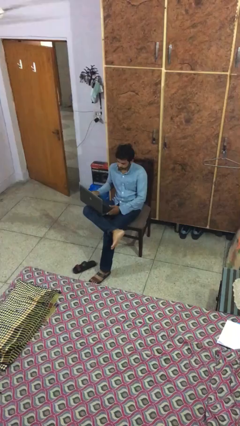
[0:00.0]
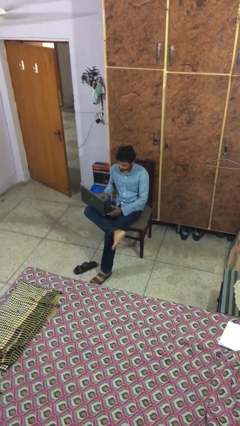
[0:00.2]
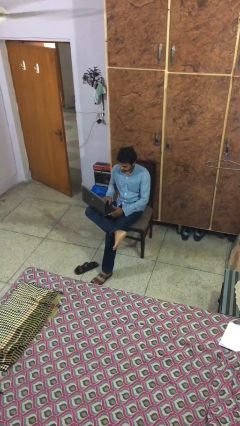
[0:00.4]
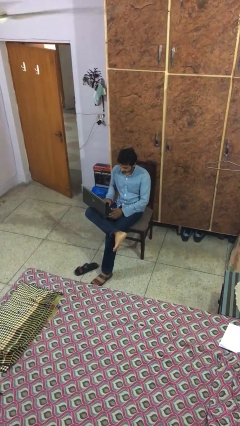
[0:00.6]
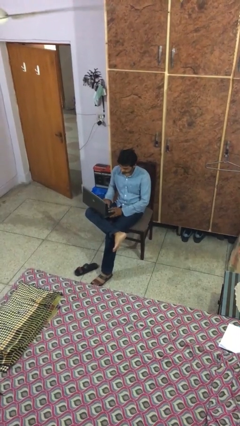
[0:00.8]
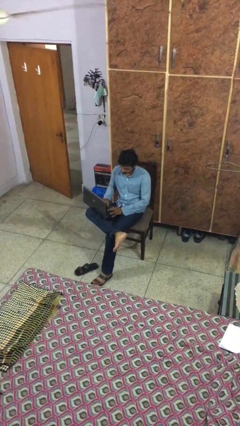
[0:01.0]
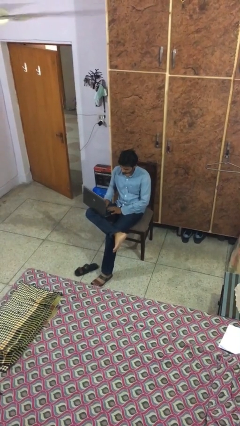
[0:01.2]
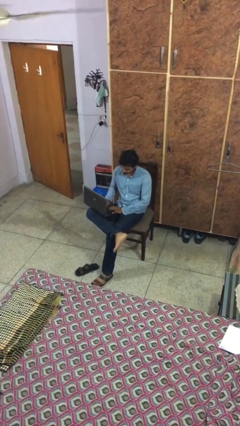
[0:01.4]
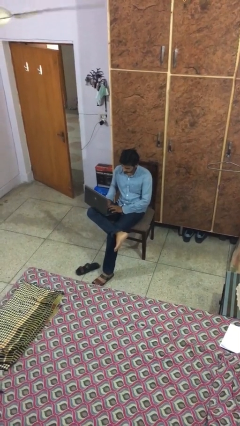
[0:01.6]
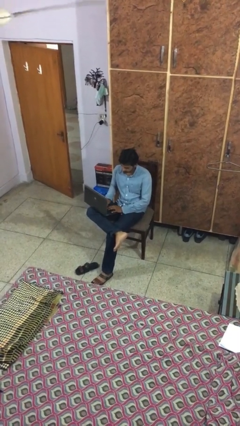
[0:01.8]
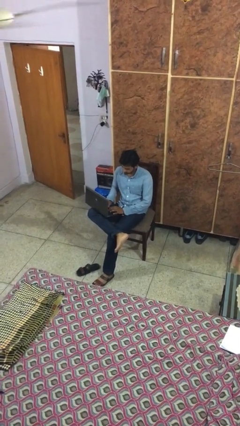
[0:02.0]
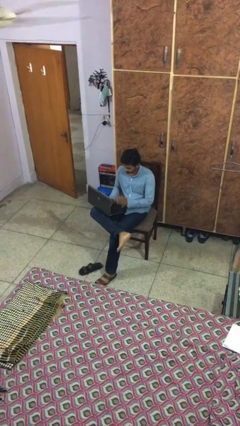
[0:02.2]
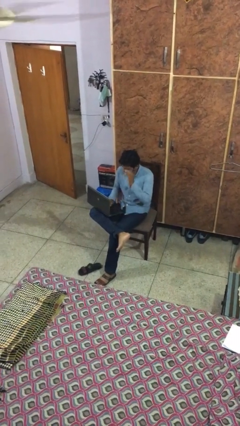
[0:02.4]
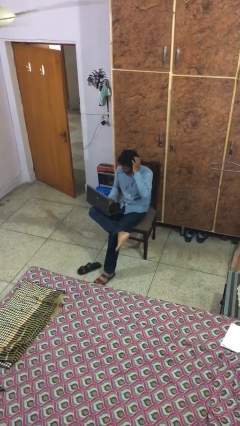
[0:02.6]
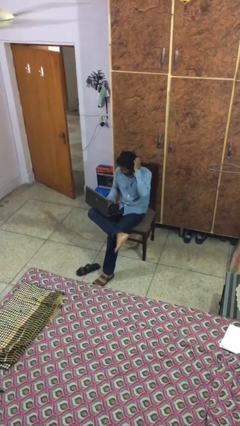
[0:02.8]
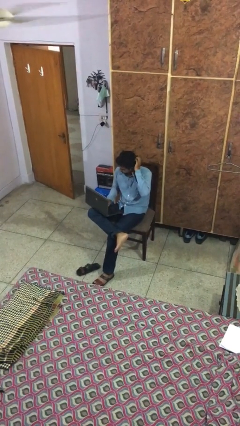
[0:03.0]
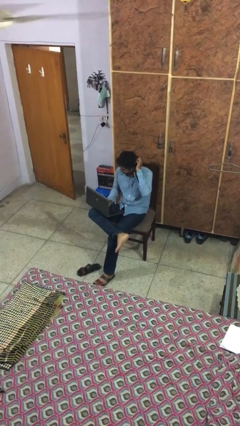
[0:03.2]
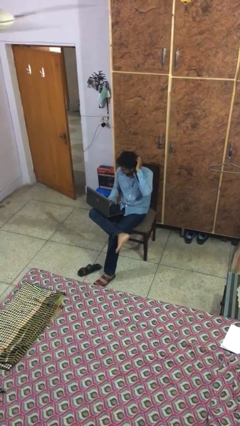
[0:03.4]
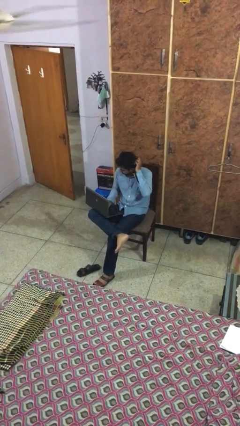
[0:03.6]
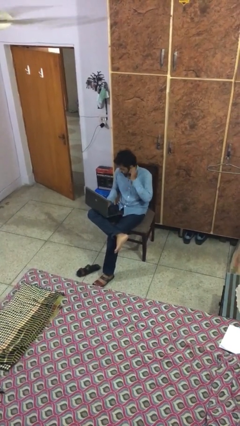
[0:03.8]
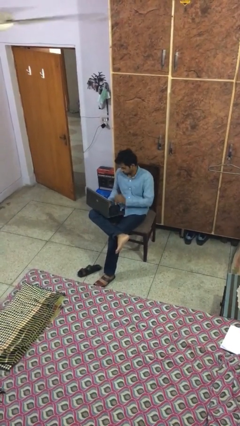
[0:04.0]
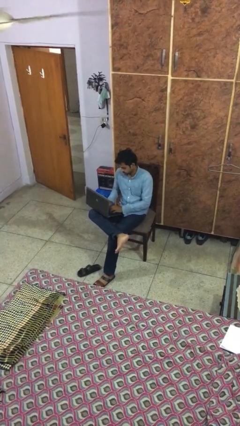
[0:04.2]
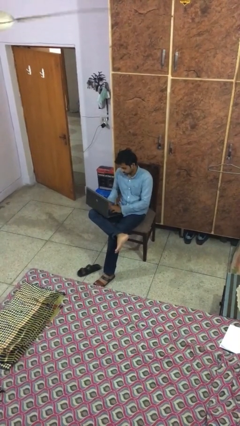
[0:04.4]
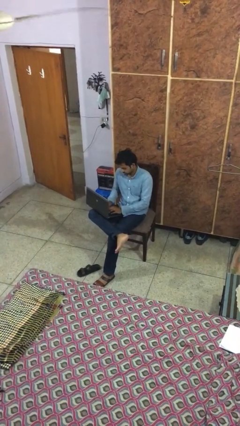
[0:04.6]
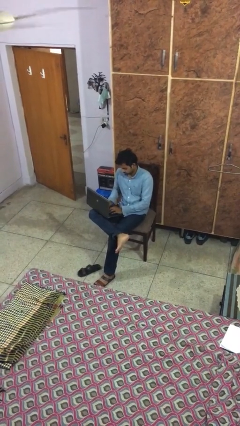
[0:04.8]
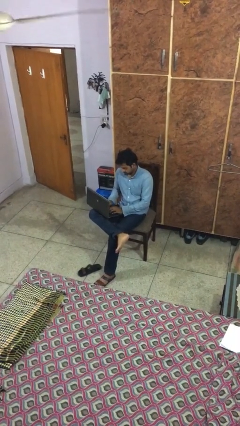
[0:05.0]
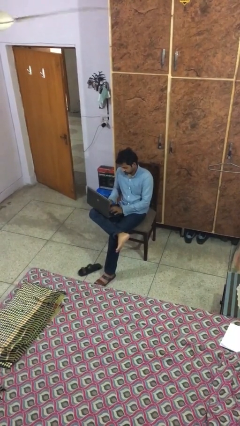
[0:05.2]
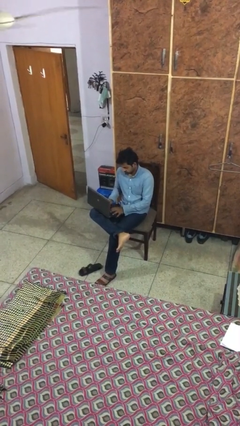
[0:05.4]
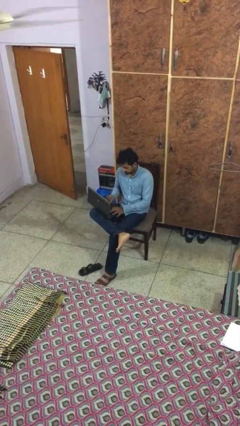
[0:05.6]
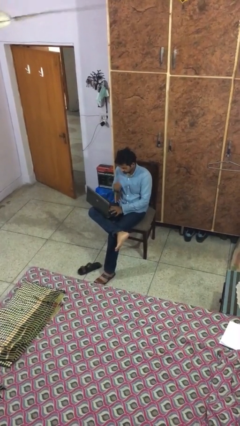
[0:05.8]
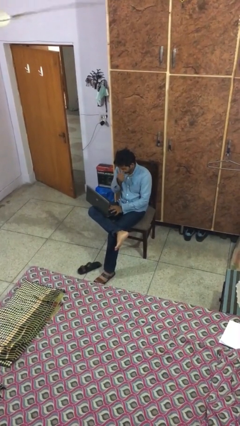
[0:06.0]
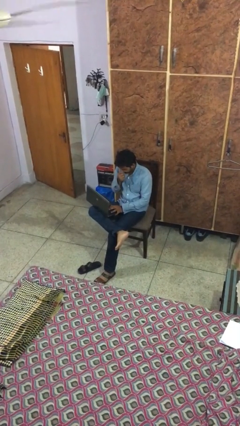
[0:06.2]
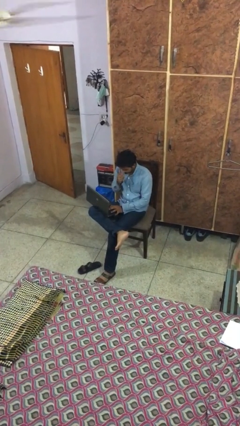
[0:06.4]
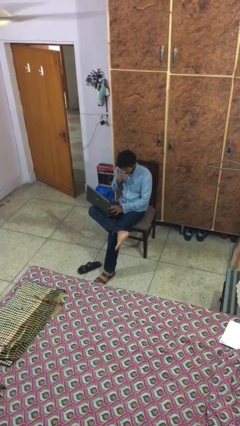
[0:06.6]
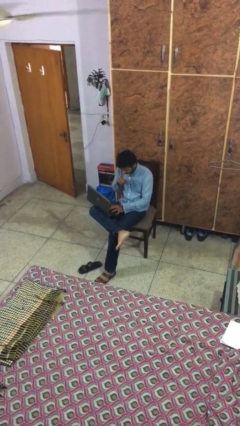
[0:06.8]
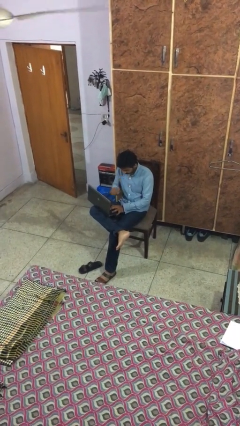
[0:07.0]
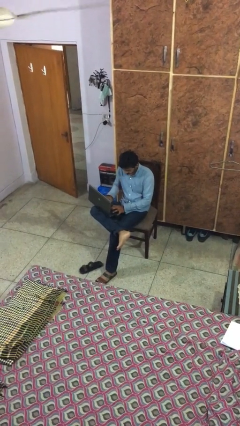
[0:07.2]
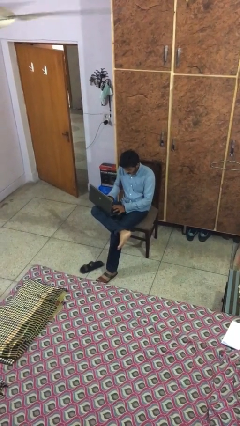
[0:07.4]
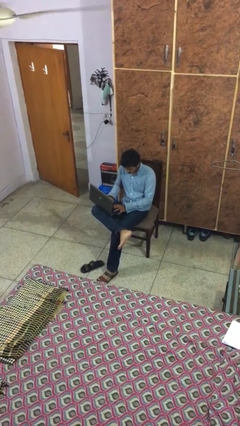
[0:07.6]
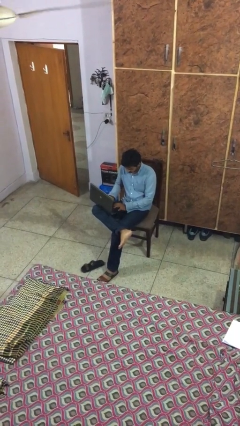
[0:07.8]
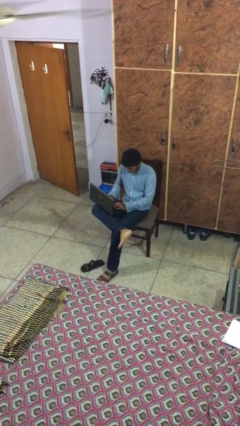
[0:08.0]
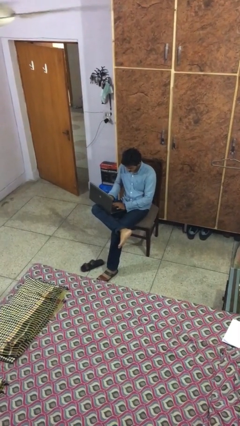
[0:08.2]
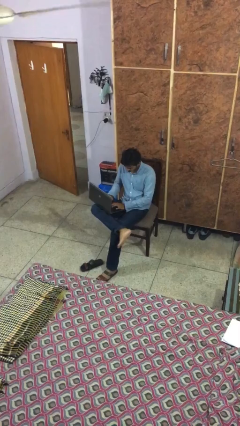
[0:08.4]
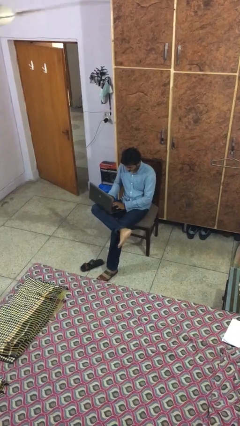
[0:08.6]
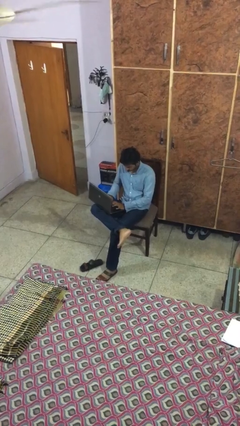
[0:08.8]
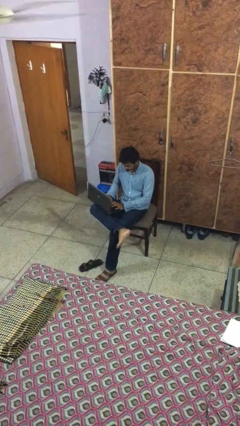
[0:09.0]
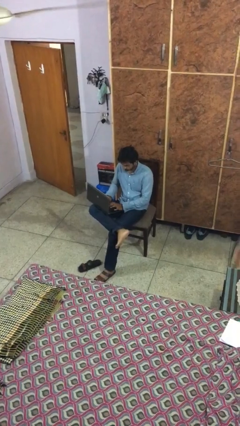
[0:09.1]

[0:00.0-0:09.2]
person interacts with laptop

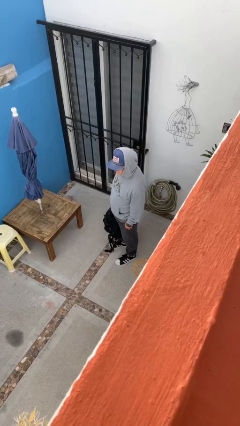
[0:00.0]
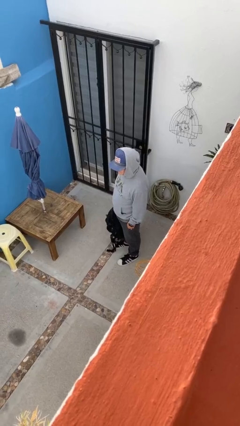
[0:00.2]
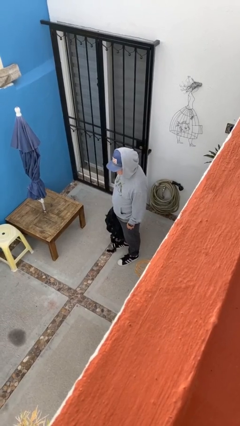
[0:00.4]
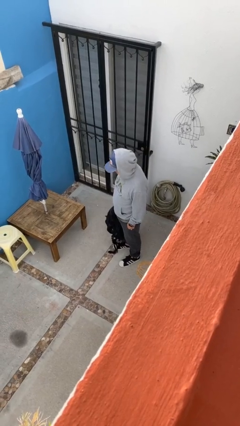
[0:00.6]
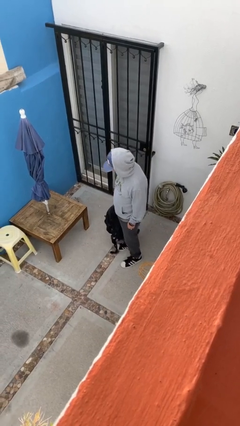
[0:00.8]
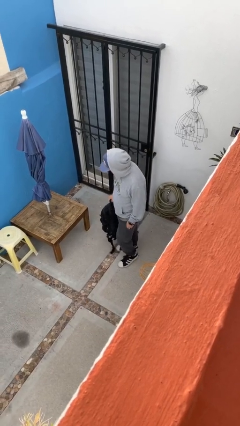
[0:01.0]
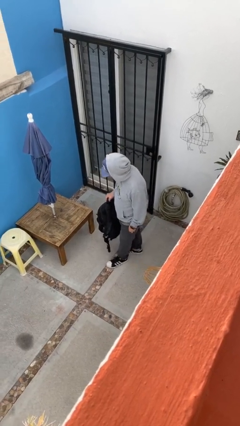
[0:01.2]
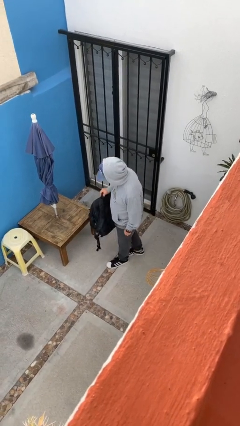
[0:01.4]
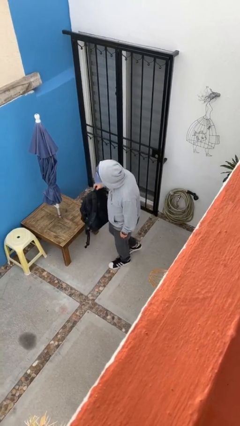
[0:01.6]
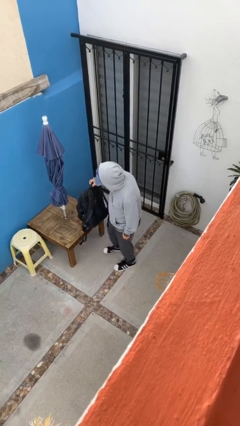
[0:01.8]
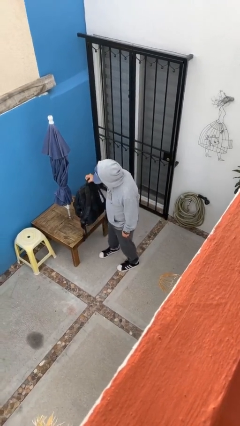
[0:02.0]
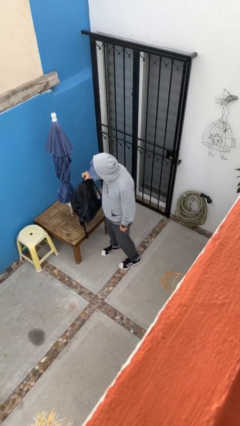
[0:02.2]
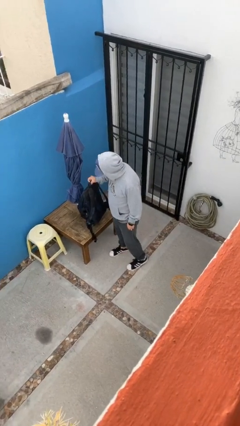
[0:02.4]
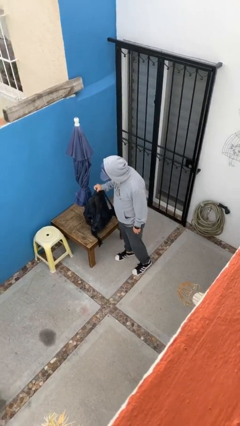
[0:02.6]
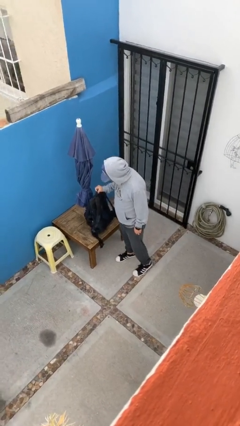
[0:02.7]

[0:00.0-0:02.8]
person puts down object on table

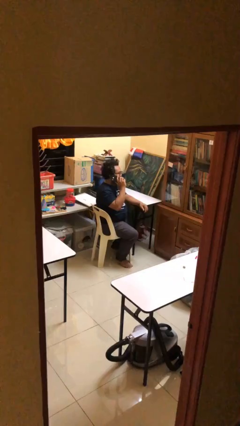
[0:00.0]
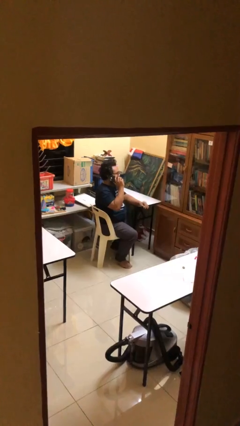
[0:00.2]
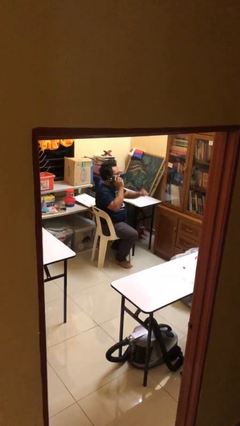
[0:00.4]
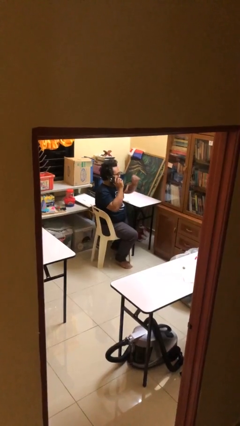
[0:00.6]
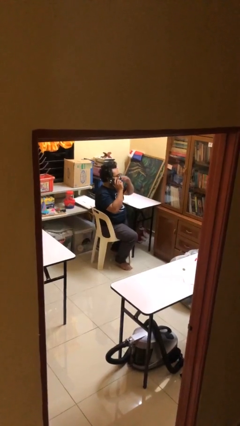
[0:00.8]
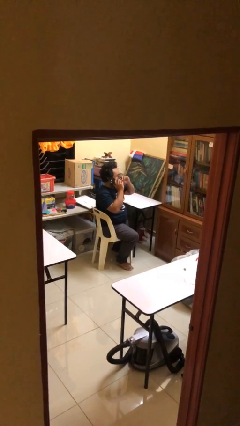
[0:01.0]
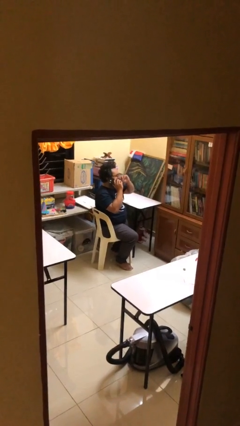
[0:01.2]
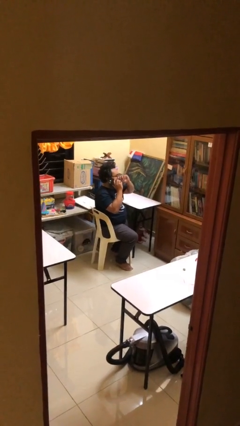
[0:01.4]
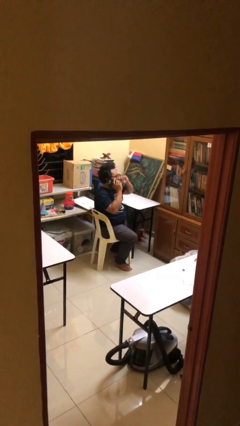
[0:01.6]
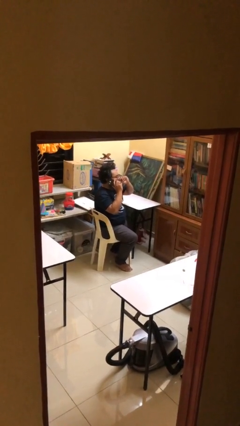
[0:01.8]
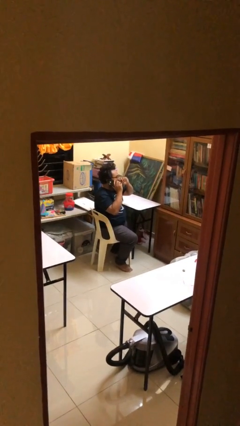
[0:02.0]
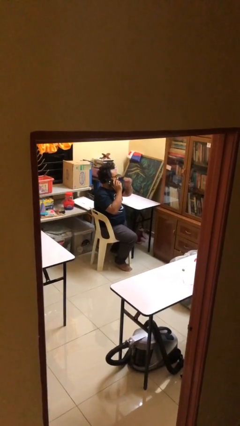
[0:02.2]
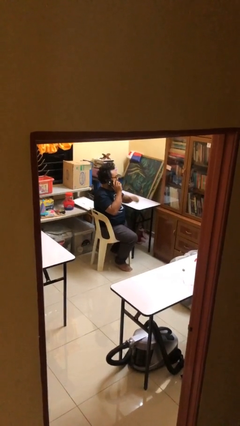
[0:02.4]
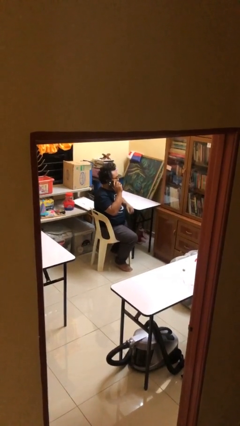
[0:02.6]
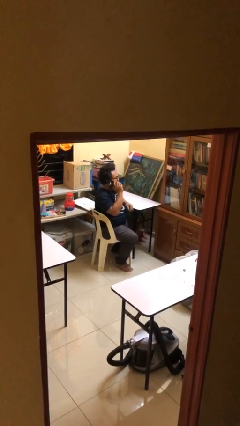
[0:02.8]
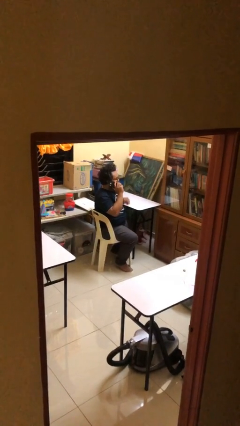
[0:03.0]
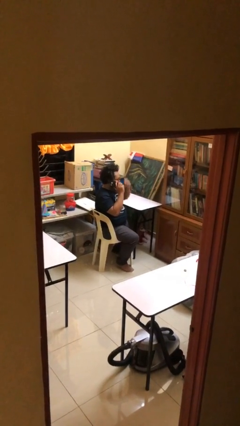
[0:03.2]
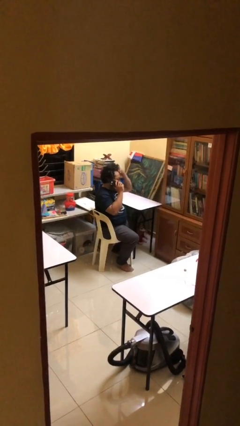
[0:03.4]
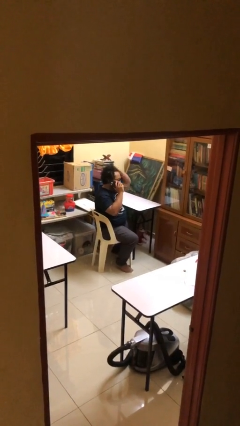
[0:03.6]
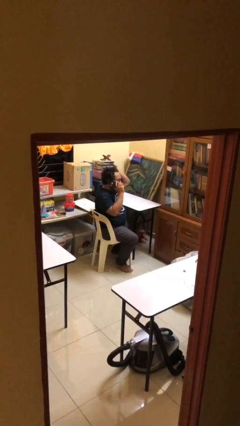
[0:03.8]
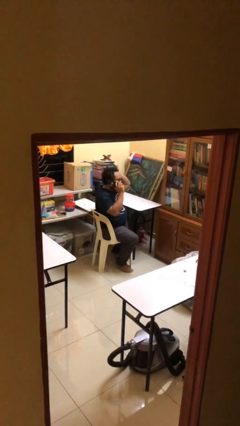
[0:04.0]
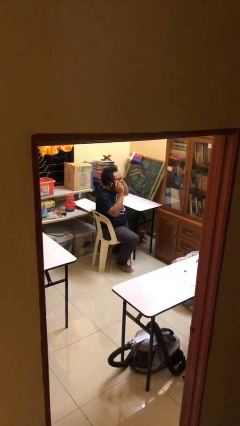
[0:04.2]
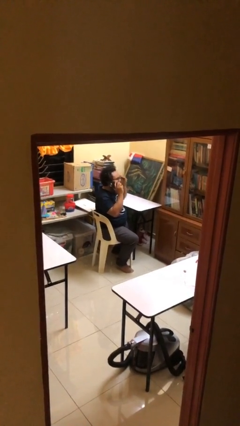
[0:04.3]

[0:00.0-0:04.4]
person talks on phone

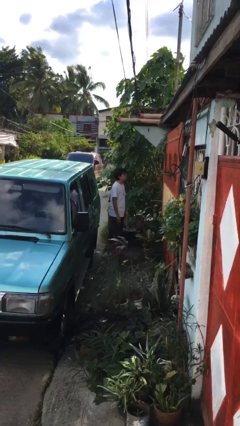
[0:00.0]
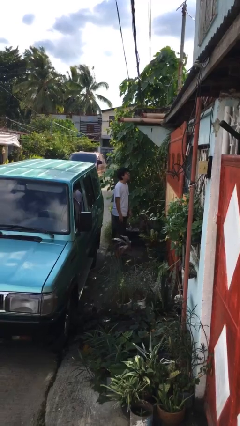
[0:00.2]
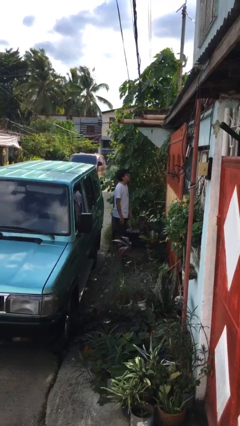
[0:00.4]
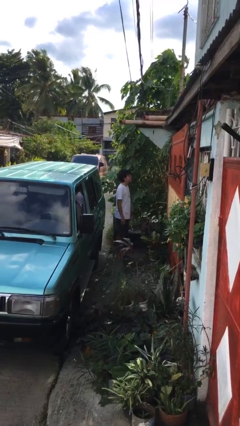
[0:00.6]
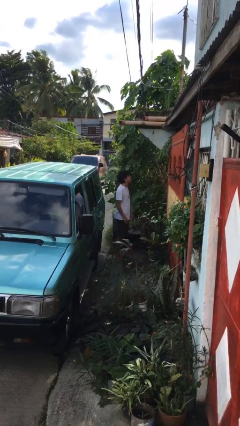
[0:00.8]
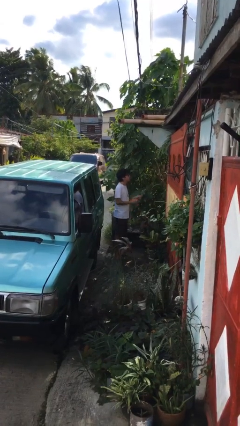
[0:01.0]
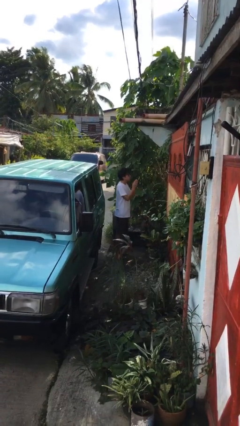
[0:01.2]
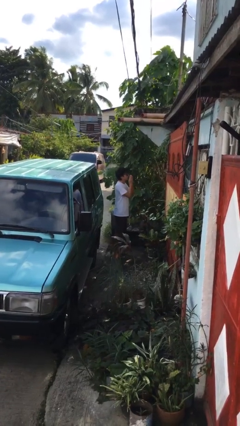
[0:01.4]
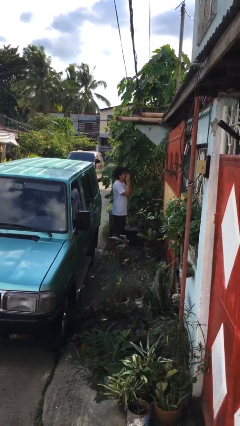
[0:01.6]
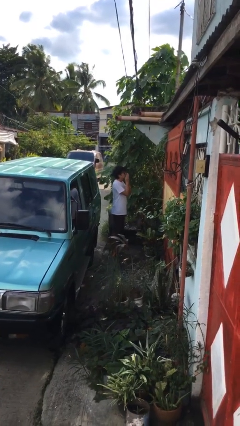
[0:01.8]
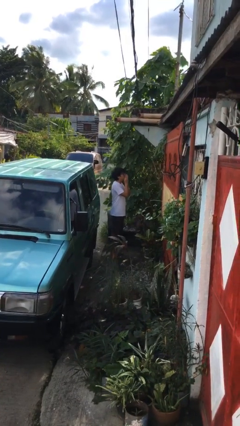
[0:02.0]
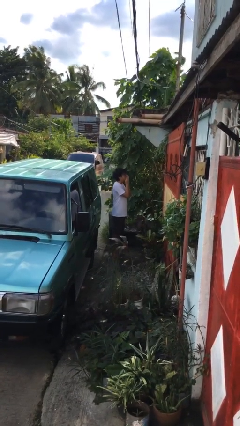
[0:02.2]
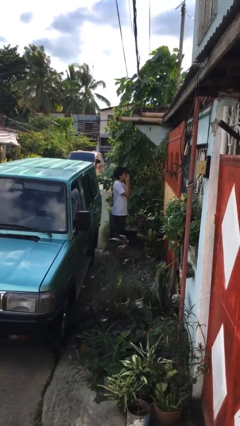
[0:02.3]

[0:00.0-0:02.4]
person blows into hands
